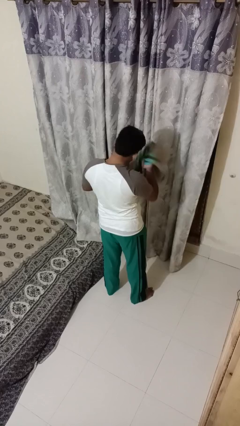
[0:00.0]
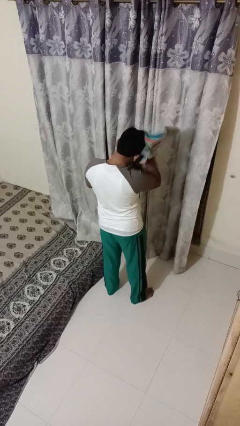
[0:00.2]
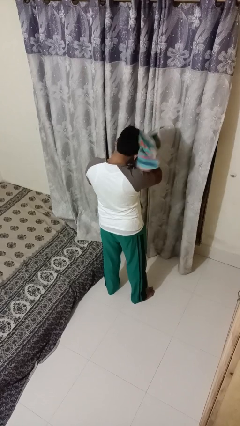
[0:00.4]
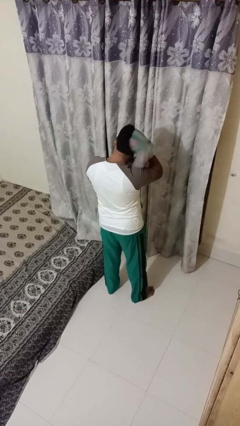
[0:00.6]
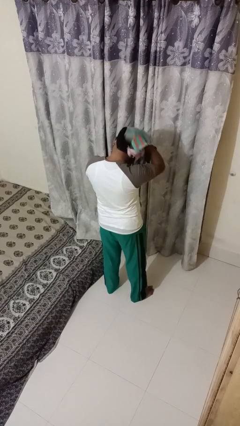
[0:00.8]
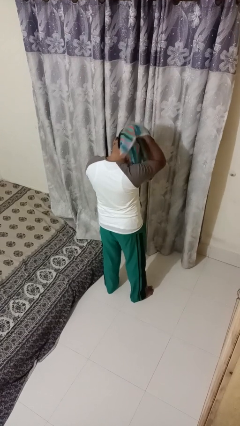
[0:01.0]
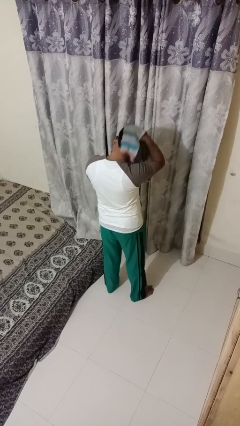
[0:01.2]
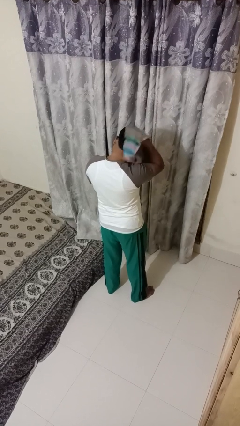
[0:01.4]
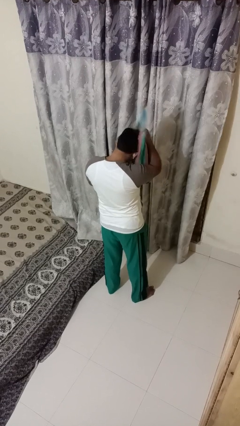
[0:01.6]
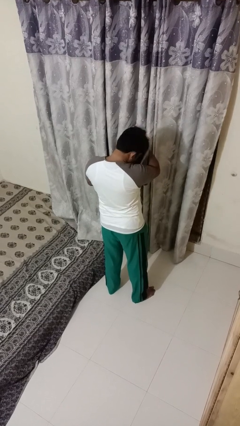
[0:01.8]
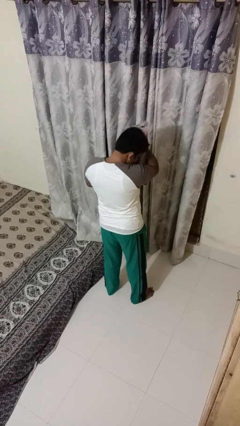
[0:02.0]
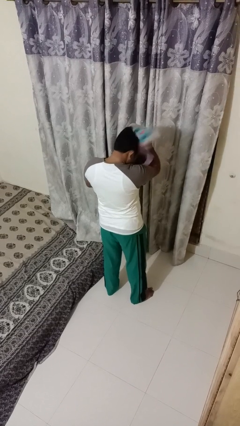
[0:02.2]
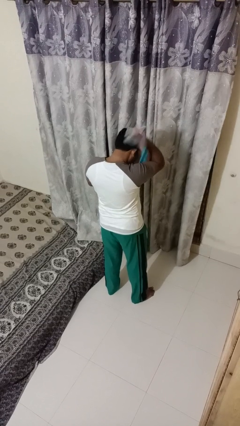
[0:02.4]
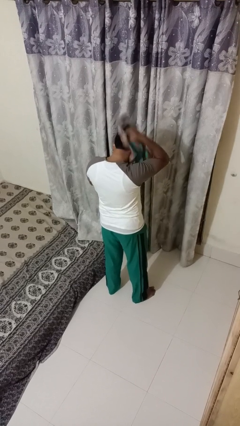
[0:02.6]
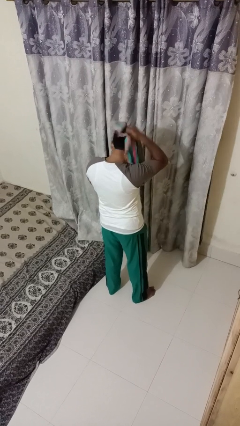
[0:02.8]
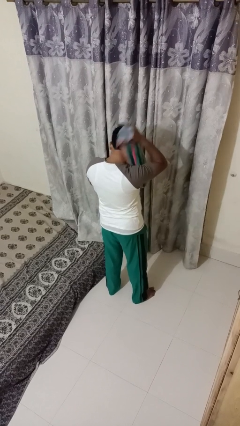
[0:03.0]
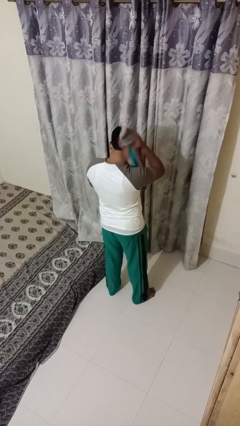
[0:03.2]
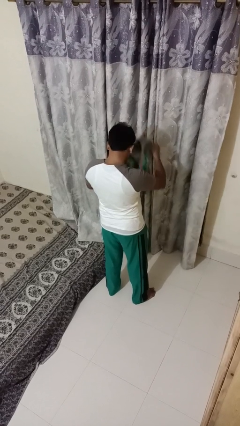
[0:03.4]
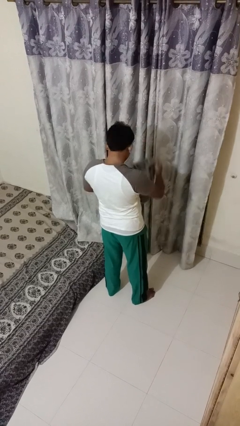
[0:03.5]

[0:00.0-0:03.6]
person dries hair with towel

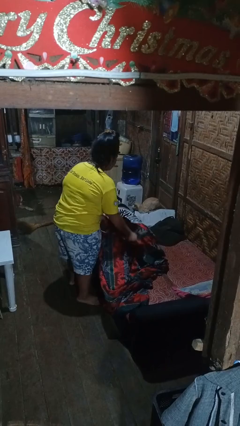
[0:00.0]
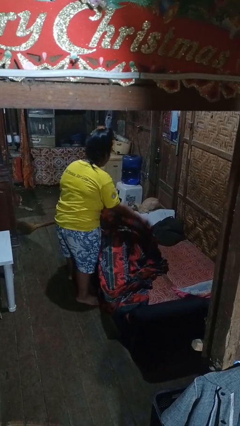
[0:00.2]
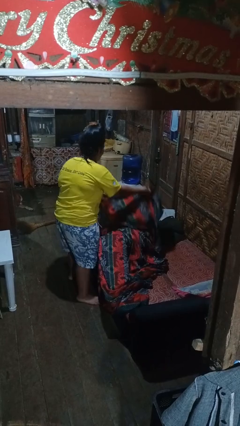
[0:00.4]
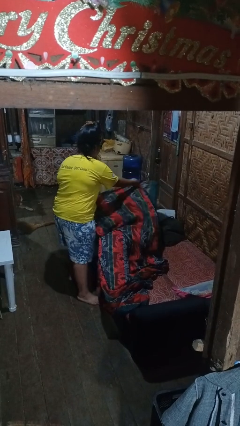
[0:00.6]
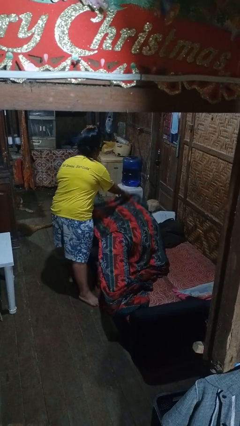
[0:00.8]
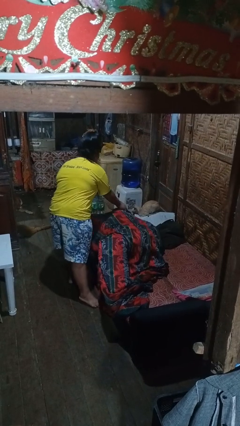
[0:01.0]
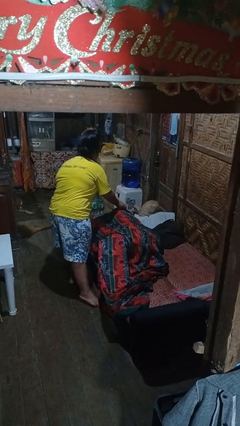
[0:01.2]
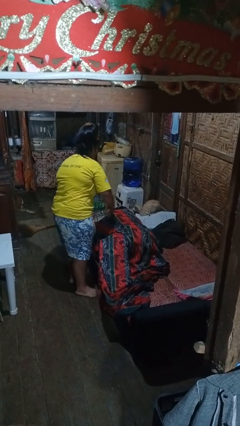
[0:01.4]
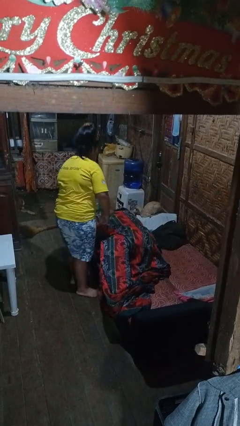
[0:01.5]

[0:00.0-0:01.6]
person covers friend with blanket

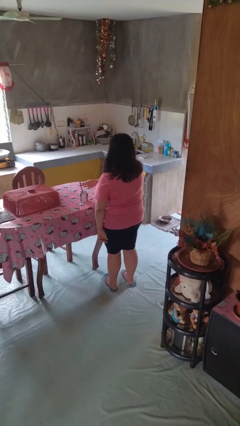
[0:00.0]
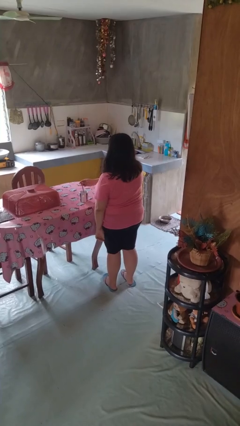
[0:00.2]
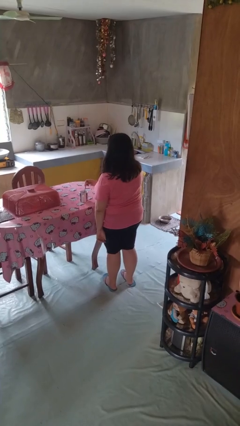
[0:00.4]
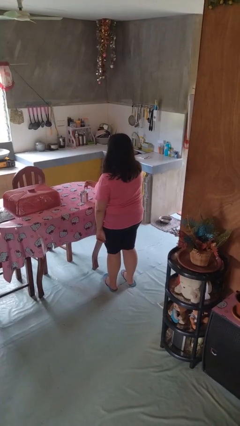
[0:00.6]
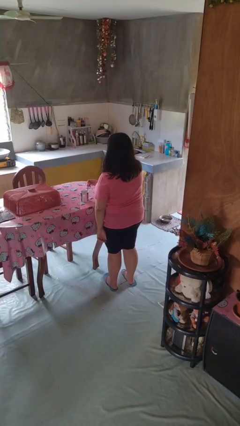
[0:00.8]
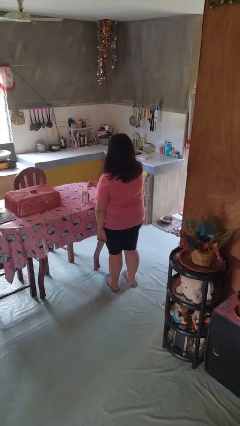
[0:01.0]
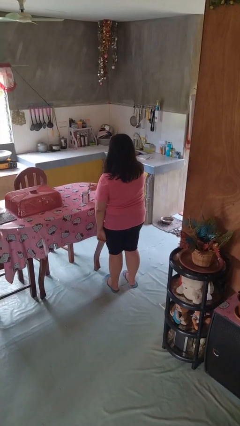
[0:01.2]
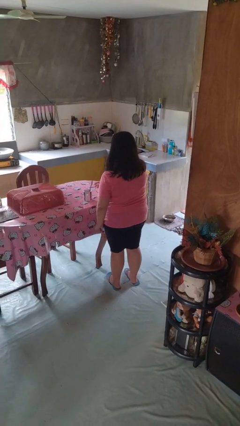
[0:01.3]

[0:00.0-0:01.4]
person stirs mug

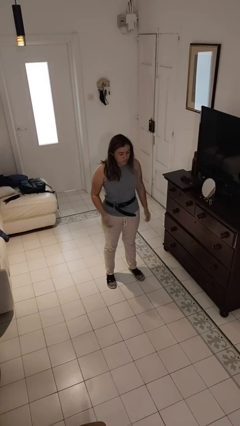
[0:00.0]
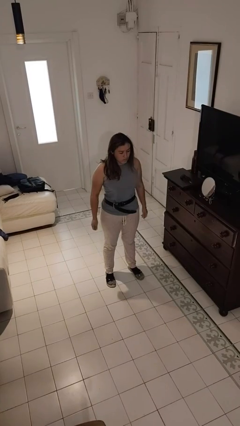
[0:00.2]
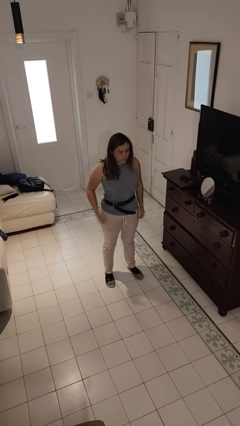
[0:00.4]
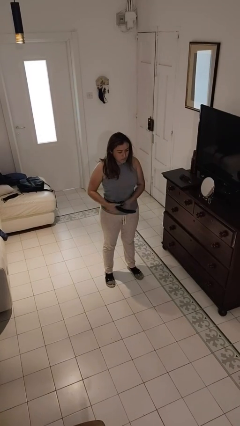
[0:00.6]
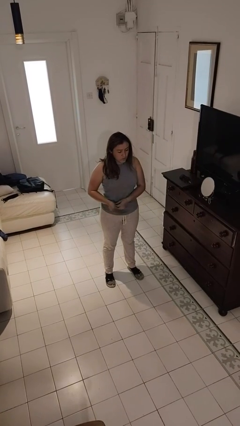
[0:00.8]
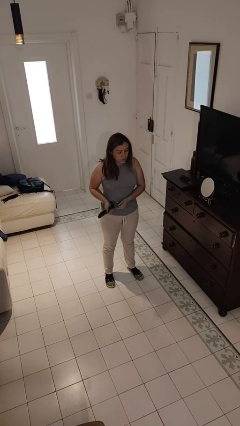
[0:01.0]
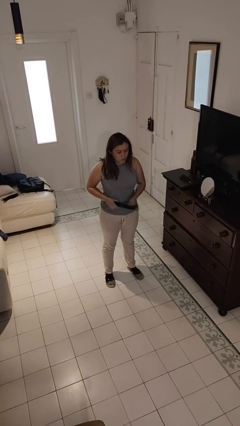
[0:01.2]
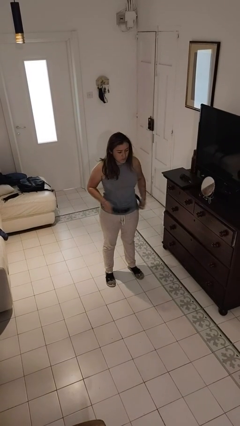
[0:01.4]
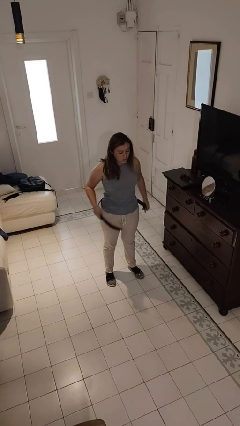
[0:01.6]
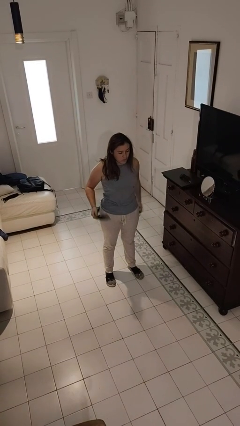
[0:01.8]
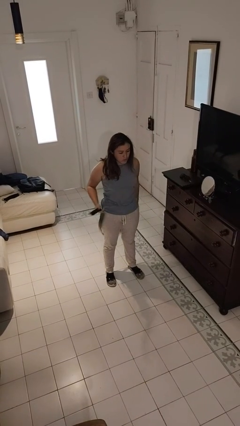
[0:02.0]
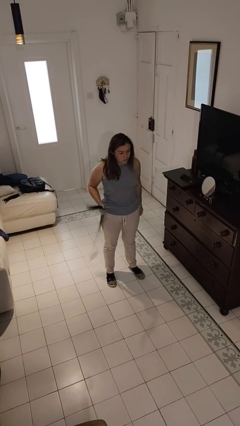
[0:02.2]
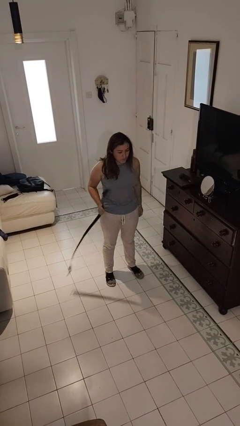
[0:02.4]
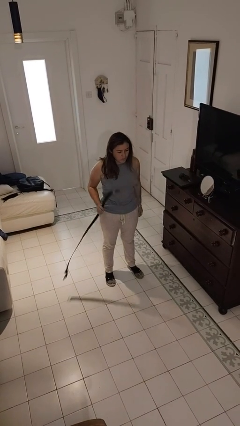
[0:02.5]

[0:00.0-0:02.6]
person takes off belt

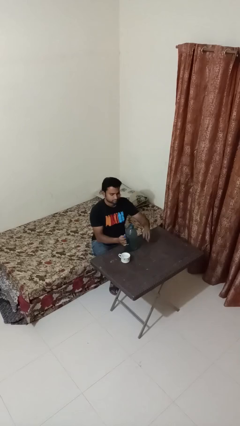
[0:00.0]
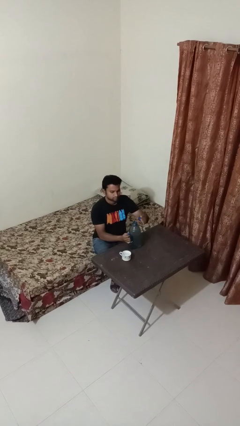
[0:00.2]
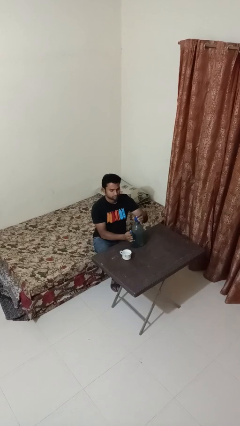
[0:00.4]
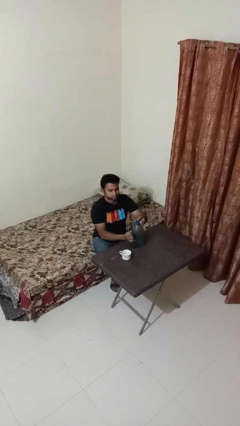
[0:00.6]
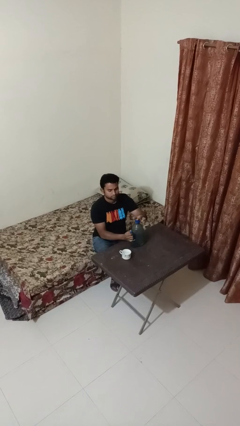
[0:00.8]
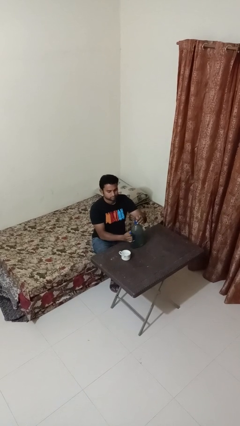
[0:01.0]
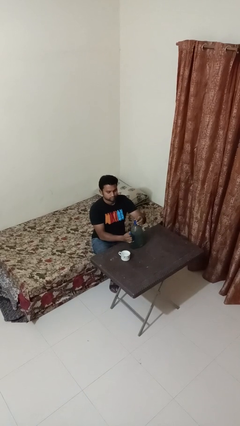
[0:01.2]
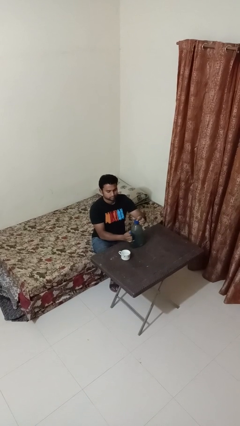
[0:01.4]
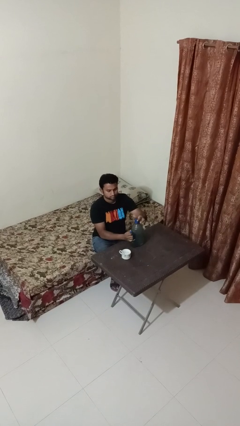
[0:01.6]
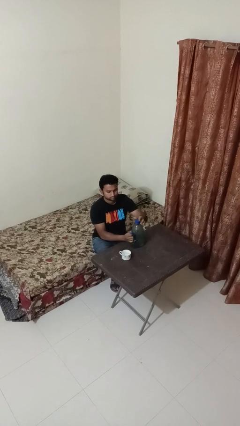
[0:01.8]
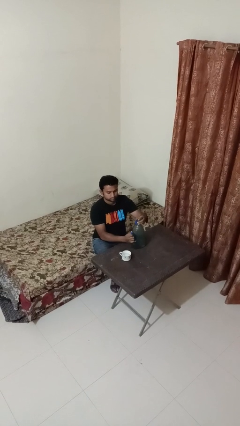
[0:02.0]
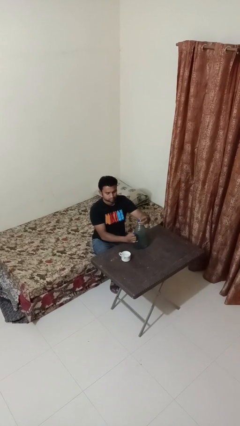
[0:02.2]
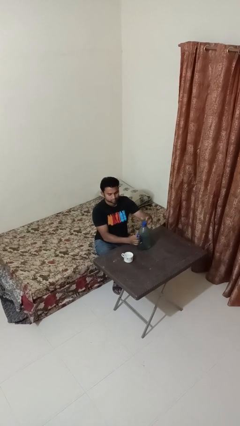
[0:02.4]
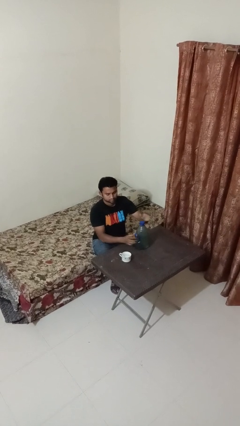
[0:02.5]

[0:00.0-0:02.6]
person screws lid to bottle

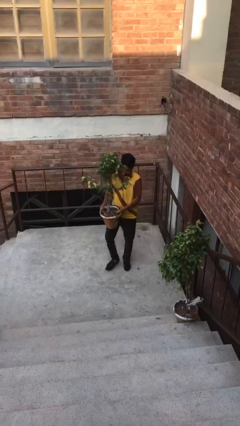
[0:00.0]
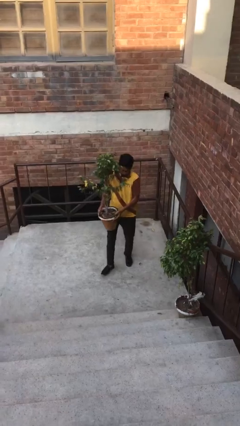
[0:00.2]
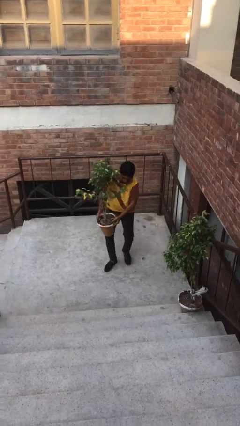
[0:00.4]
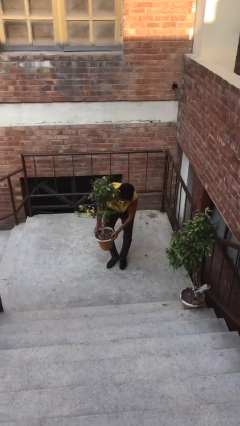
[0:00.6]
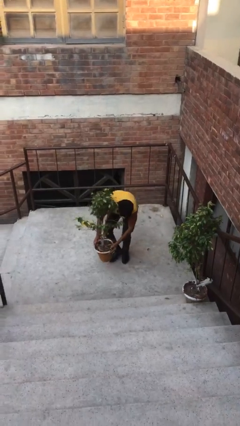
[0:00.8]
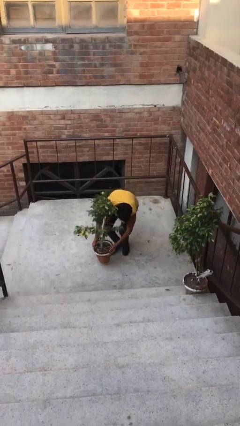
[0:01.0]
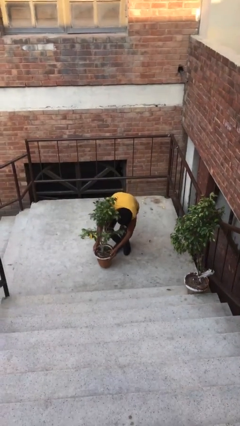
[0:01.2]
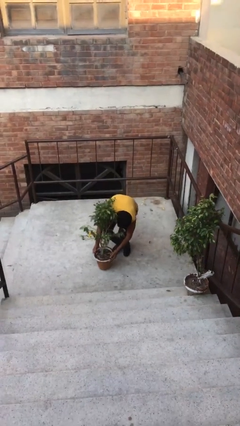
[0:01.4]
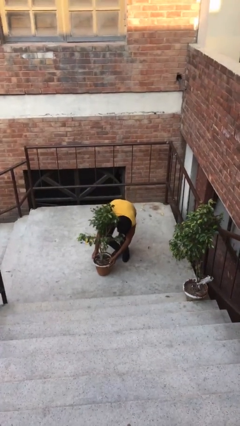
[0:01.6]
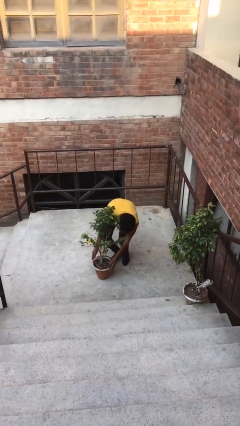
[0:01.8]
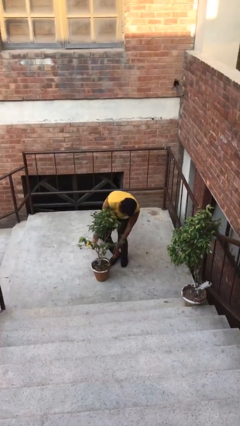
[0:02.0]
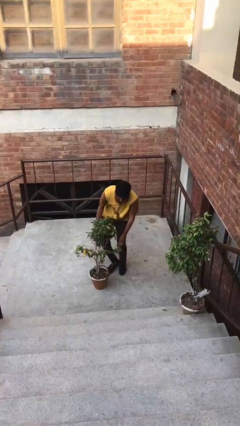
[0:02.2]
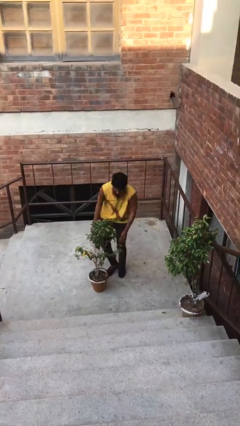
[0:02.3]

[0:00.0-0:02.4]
person puts down object on floor

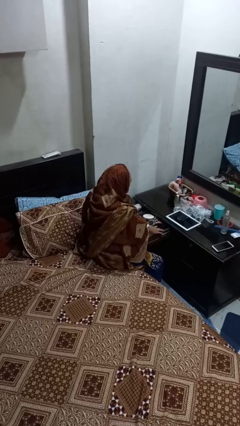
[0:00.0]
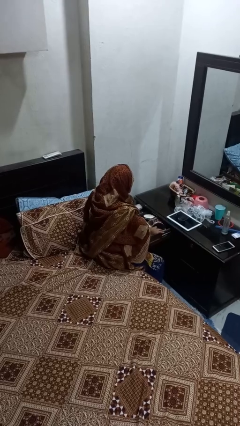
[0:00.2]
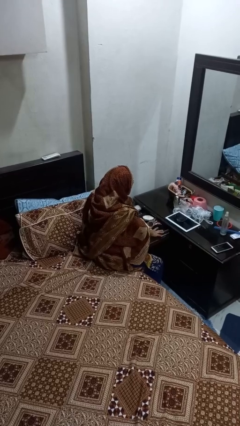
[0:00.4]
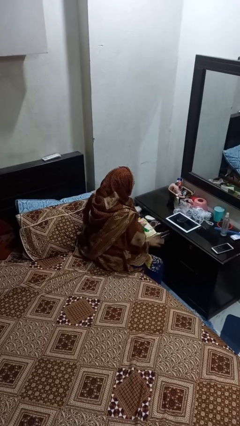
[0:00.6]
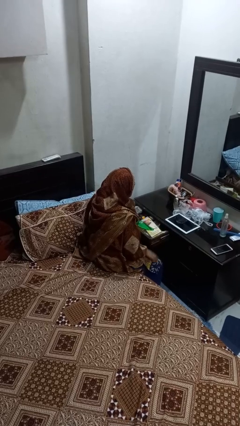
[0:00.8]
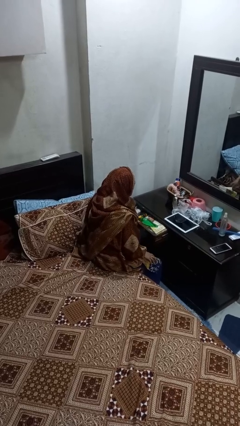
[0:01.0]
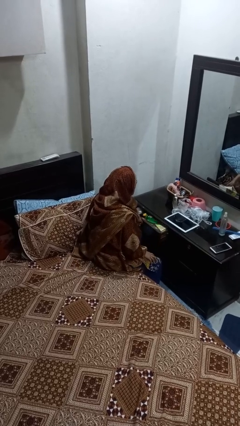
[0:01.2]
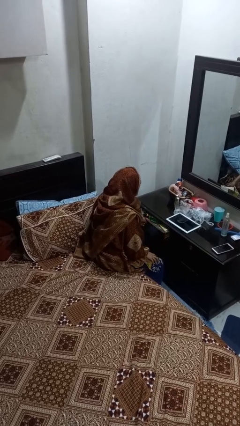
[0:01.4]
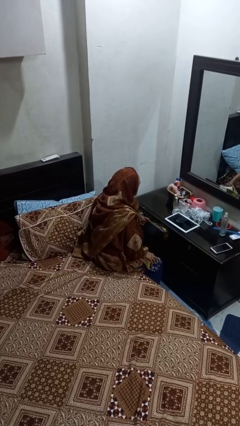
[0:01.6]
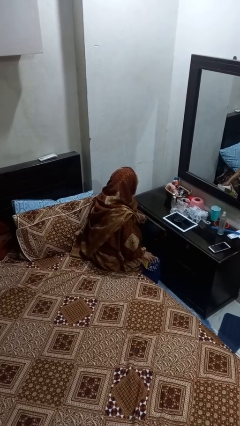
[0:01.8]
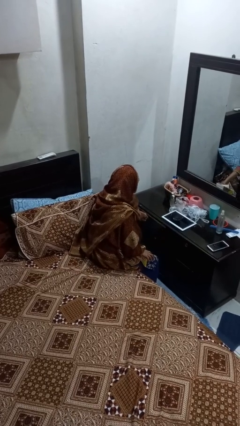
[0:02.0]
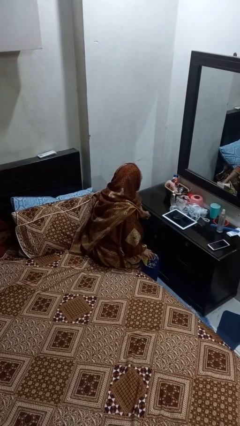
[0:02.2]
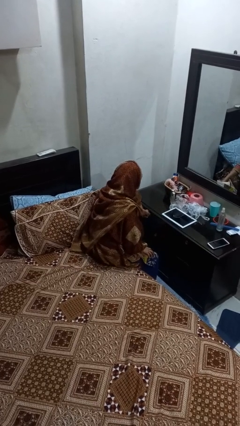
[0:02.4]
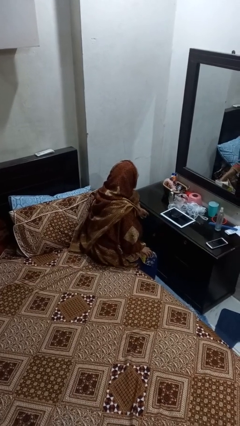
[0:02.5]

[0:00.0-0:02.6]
person closes dresser drawer

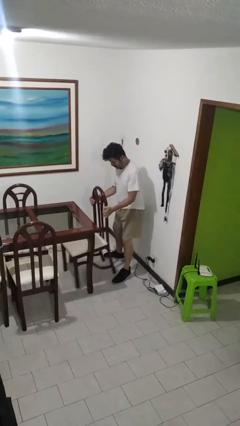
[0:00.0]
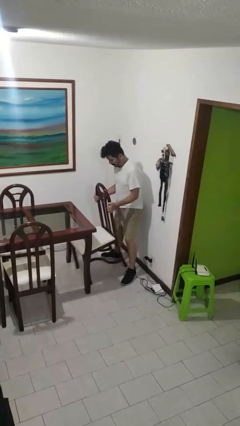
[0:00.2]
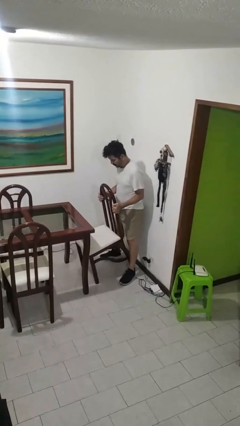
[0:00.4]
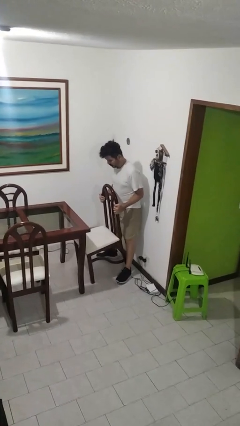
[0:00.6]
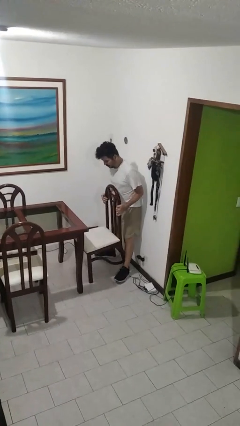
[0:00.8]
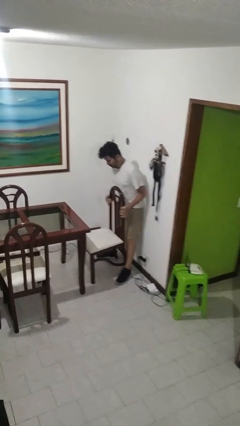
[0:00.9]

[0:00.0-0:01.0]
person pulls out chair
